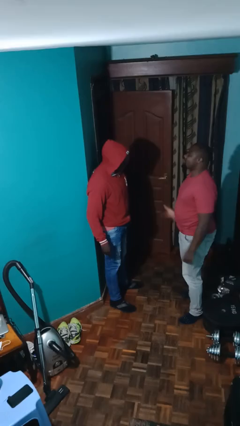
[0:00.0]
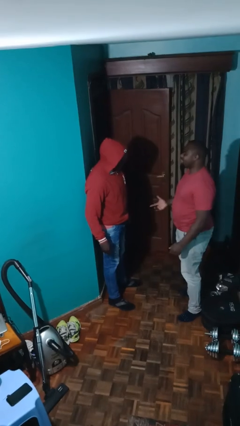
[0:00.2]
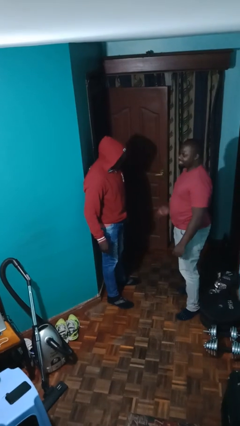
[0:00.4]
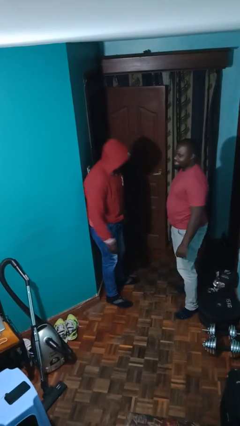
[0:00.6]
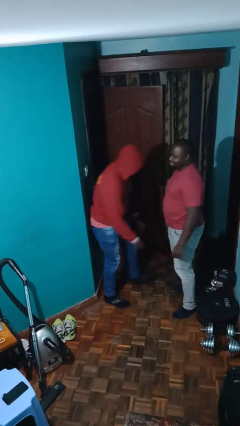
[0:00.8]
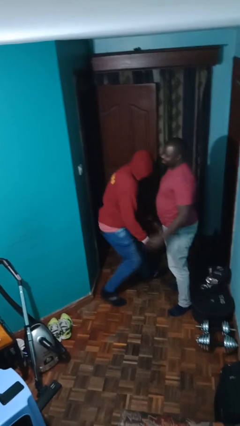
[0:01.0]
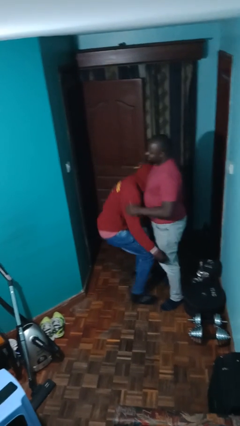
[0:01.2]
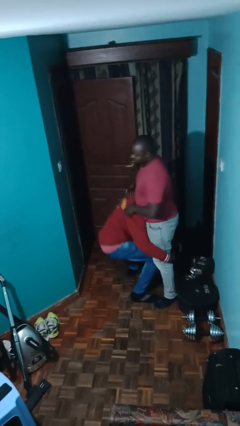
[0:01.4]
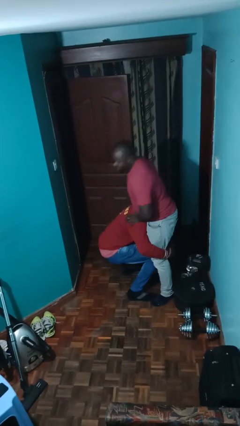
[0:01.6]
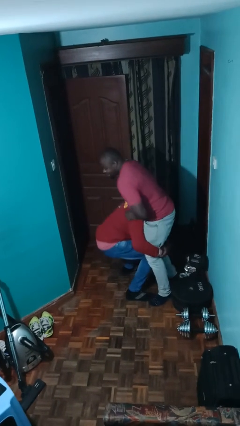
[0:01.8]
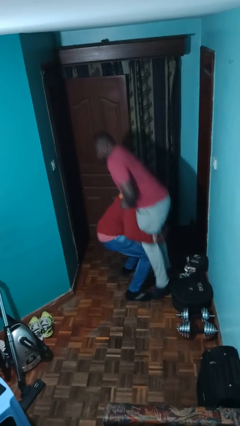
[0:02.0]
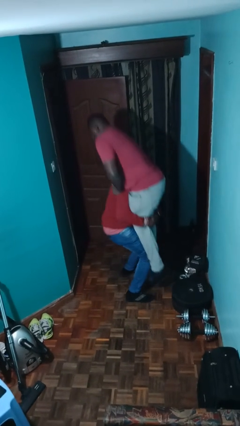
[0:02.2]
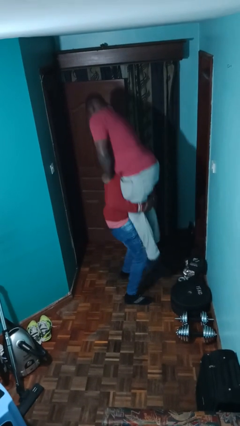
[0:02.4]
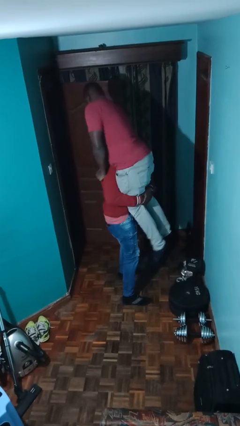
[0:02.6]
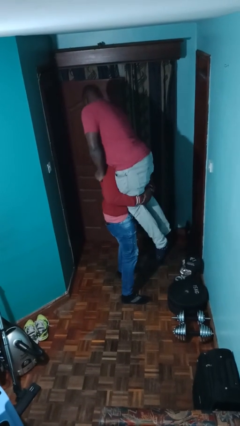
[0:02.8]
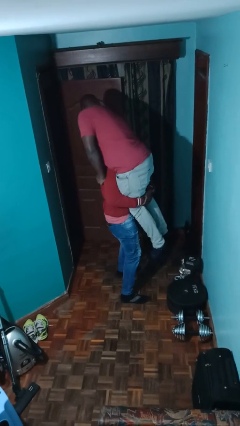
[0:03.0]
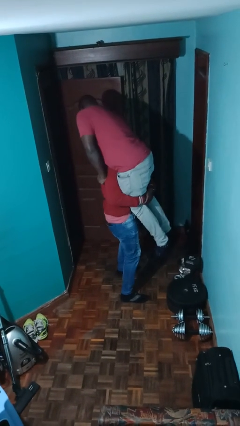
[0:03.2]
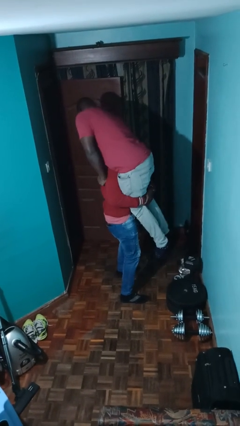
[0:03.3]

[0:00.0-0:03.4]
person picks up person

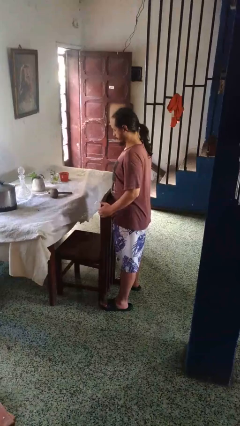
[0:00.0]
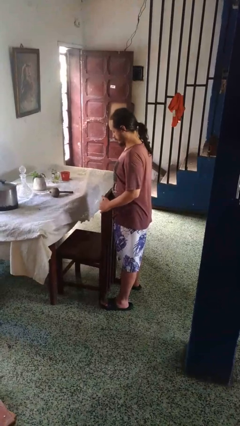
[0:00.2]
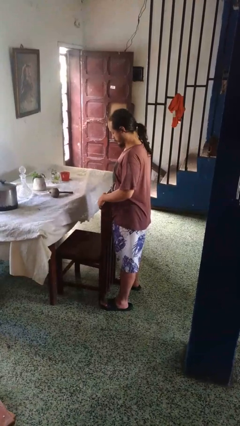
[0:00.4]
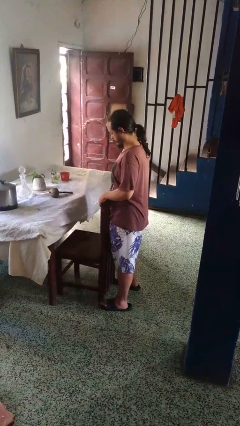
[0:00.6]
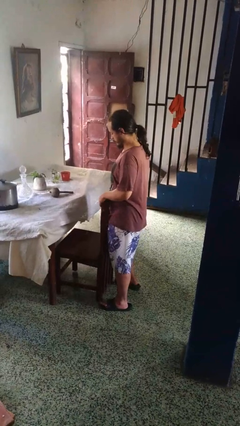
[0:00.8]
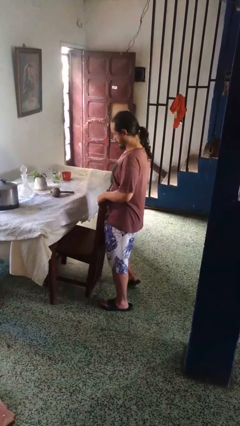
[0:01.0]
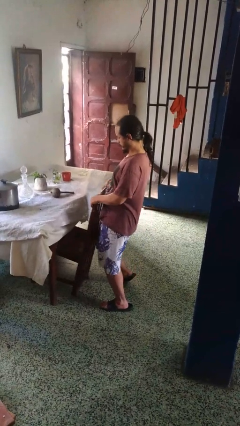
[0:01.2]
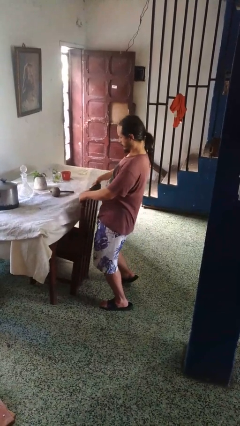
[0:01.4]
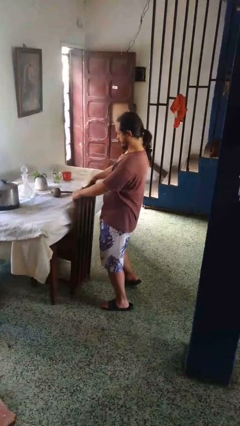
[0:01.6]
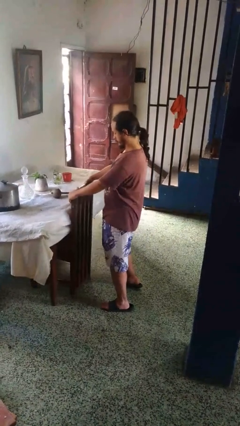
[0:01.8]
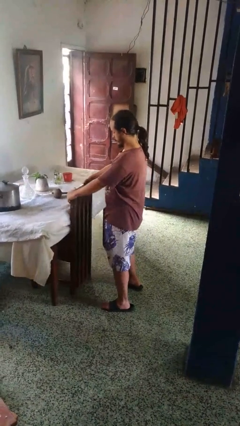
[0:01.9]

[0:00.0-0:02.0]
person pushes in chair

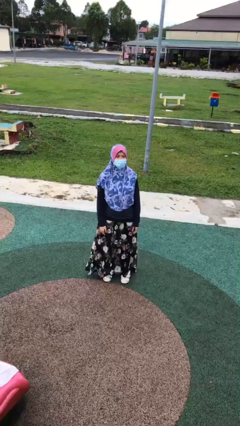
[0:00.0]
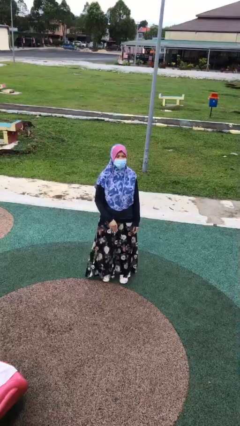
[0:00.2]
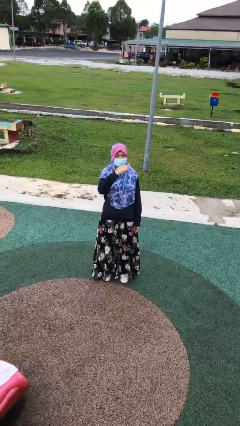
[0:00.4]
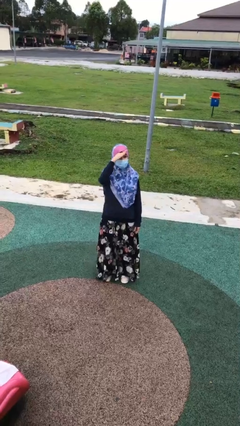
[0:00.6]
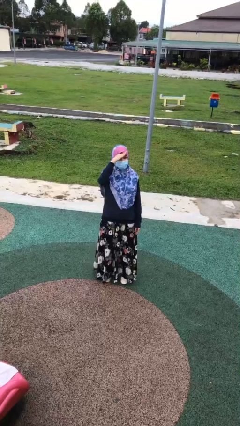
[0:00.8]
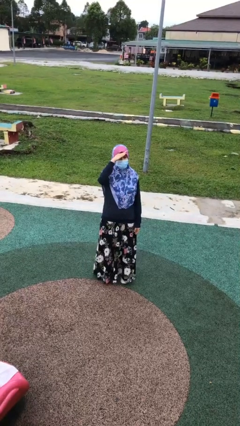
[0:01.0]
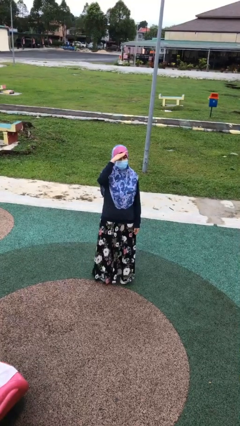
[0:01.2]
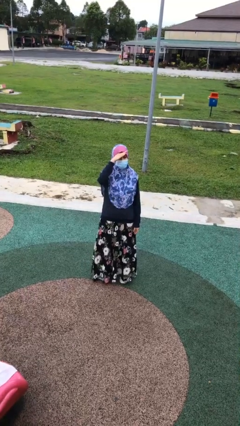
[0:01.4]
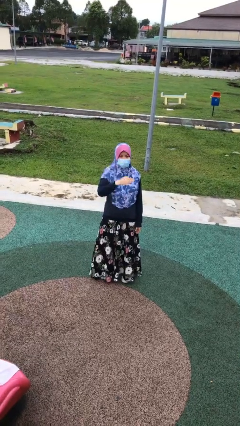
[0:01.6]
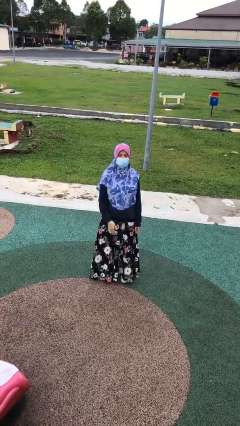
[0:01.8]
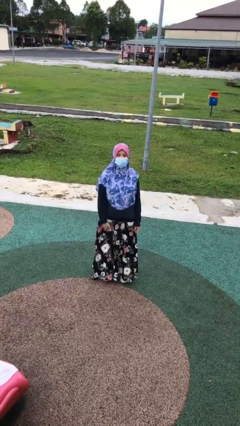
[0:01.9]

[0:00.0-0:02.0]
person salutes

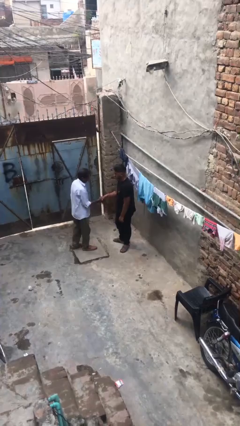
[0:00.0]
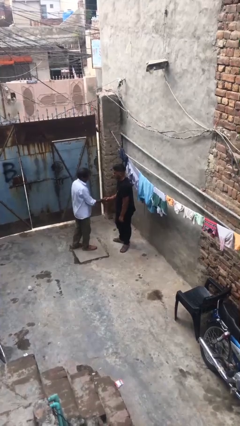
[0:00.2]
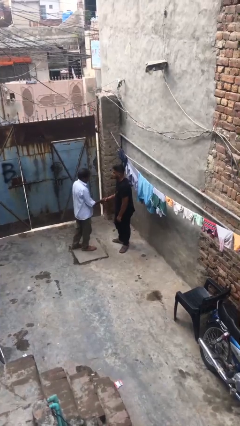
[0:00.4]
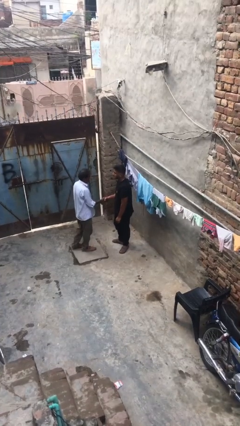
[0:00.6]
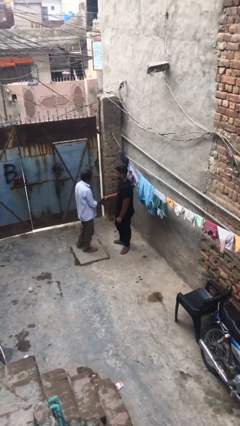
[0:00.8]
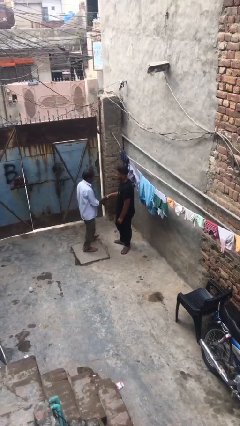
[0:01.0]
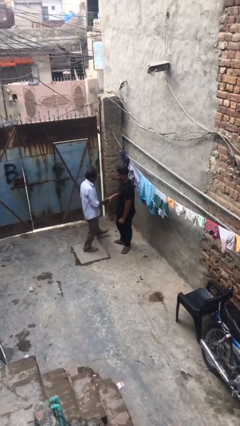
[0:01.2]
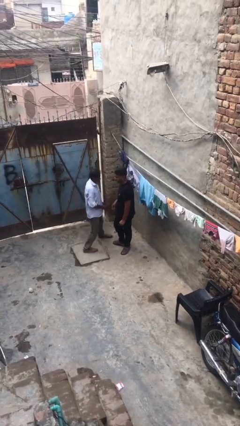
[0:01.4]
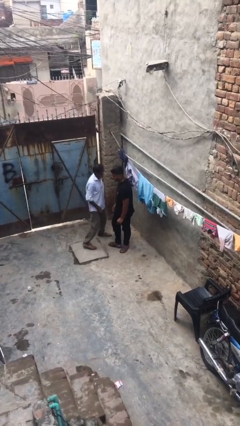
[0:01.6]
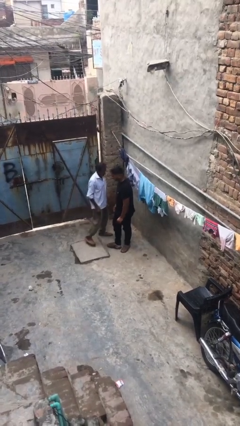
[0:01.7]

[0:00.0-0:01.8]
person shakes hand

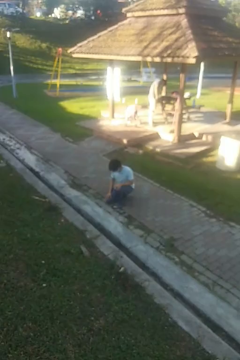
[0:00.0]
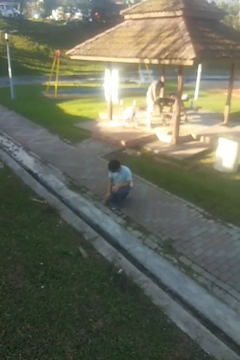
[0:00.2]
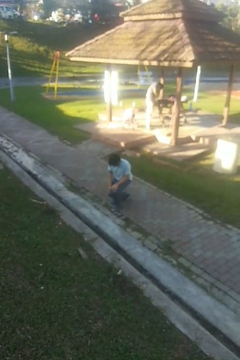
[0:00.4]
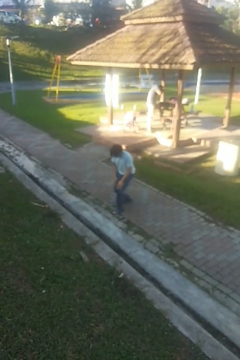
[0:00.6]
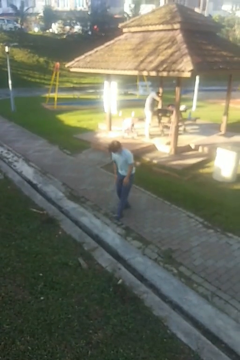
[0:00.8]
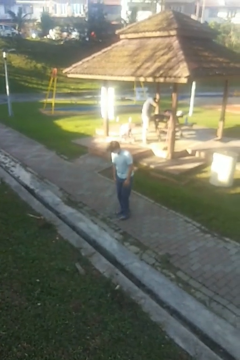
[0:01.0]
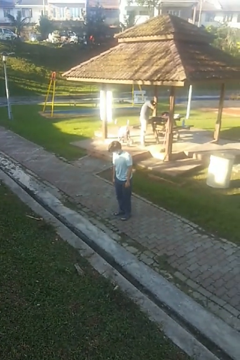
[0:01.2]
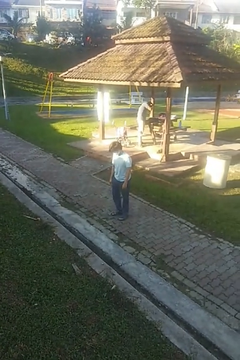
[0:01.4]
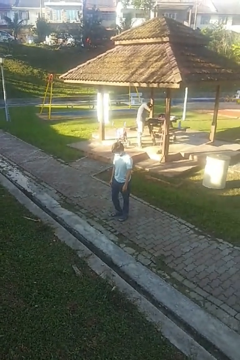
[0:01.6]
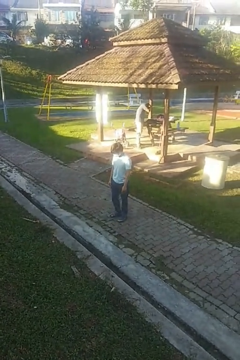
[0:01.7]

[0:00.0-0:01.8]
person stands up from floor

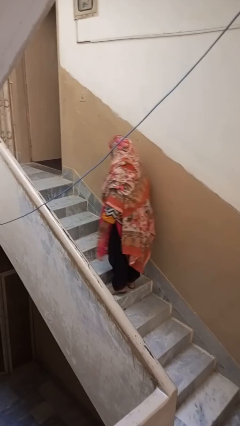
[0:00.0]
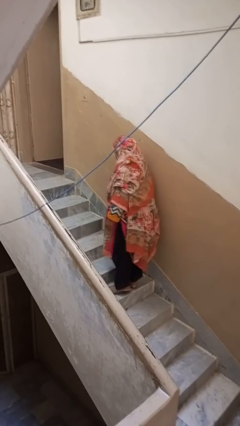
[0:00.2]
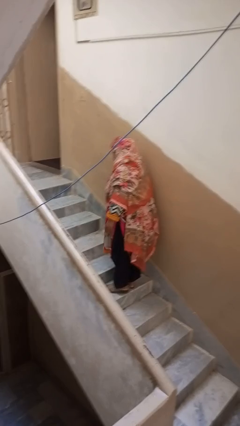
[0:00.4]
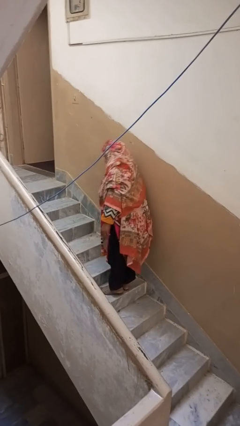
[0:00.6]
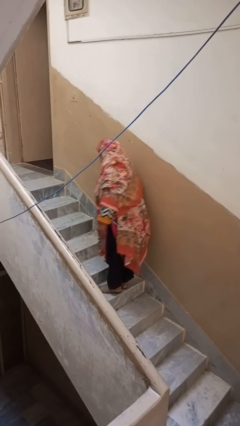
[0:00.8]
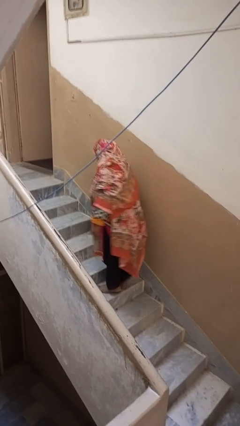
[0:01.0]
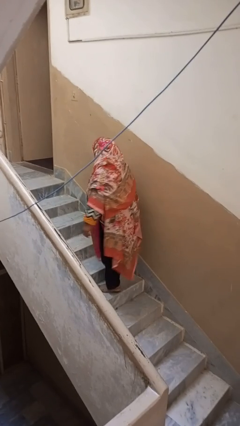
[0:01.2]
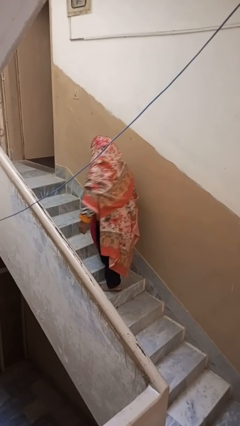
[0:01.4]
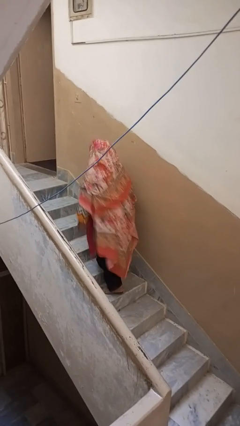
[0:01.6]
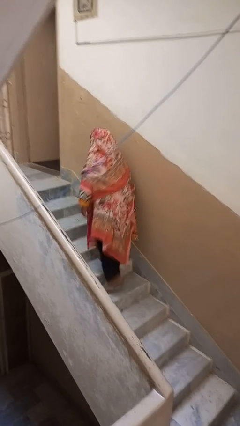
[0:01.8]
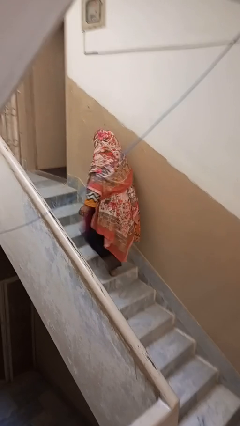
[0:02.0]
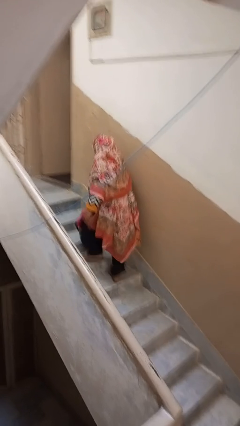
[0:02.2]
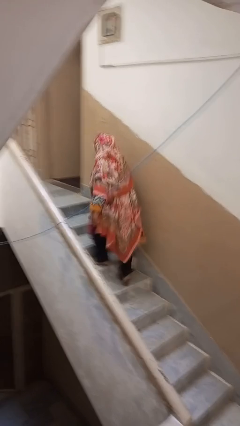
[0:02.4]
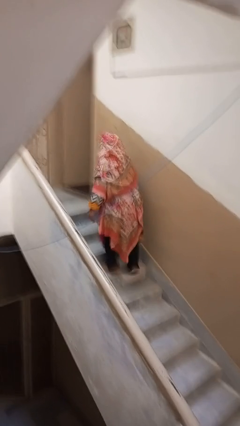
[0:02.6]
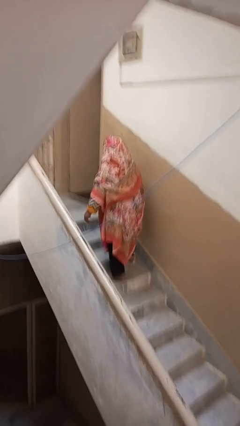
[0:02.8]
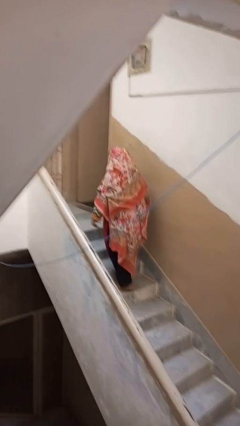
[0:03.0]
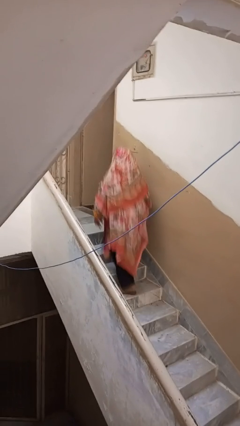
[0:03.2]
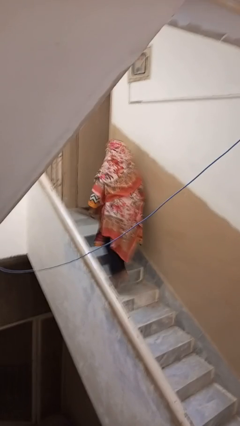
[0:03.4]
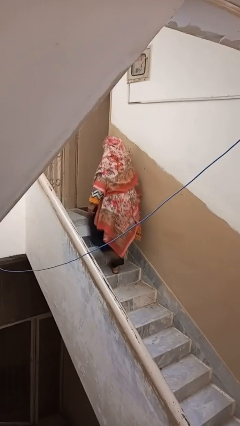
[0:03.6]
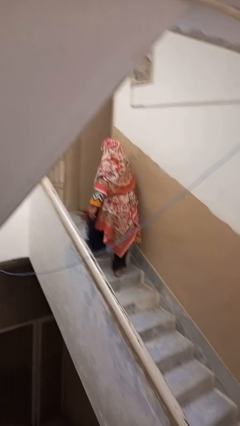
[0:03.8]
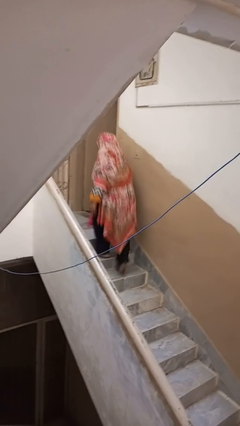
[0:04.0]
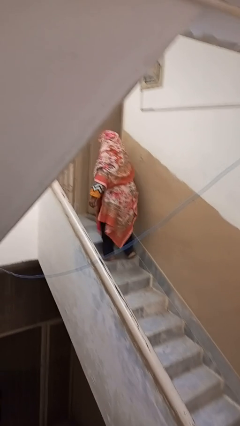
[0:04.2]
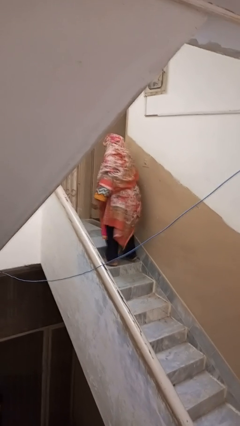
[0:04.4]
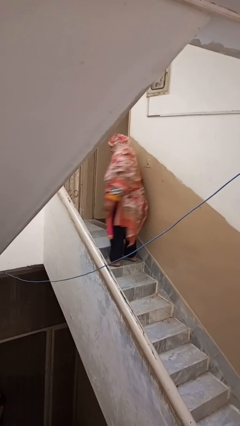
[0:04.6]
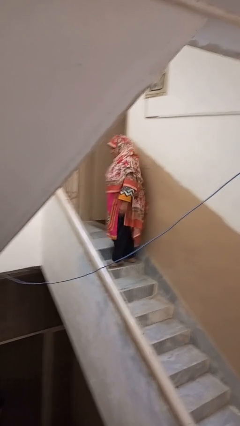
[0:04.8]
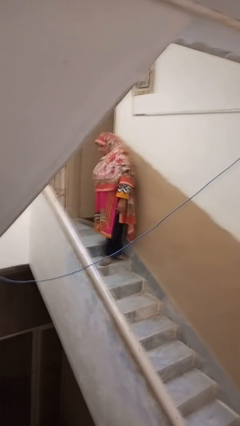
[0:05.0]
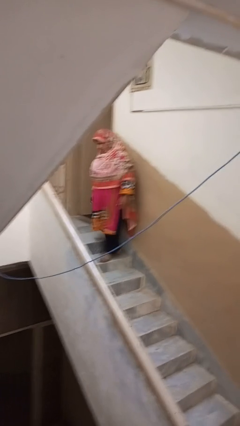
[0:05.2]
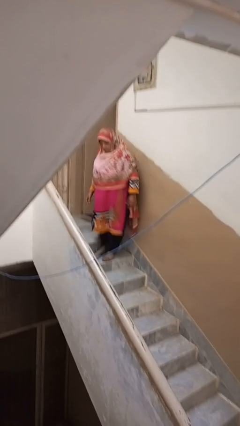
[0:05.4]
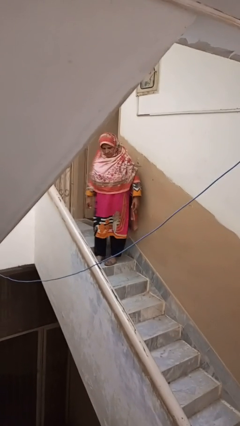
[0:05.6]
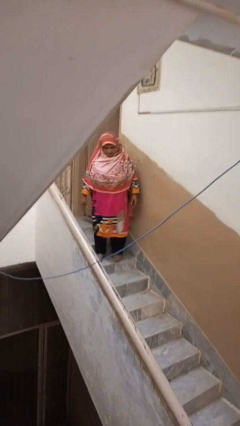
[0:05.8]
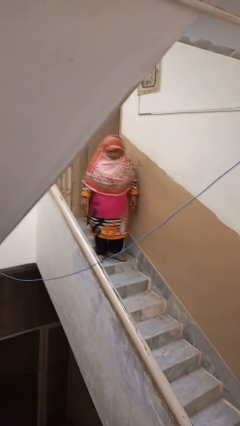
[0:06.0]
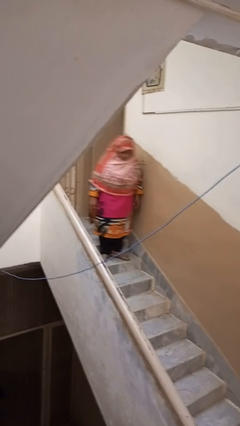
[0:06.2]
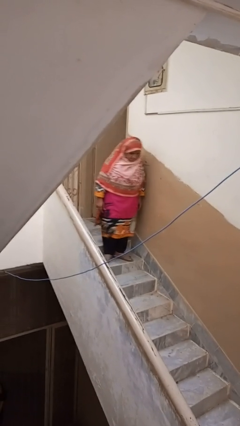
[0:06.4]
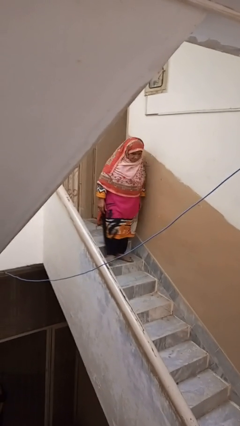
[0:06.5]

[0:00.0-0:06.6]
person climbs up stairs
